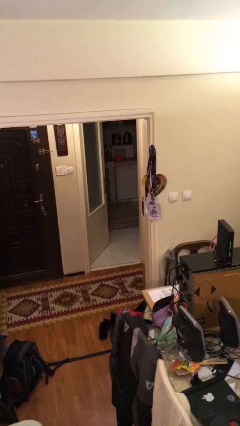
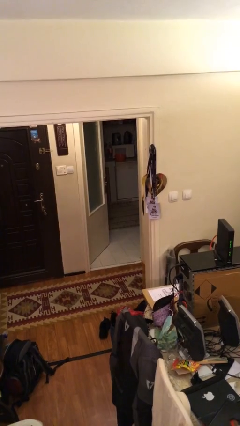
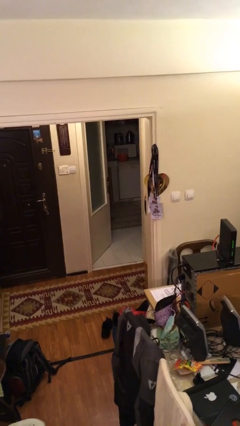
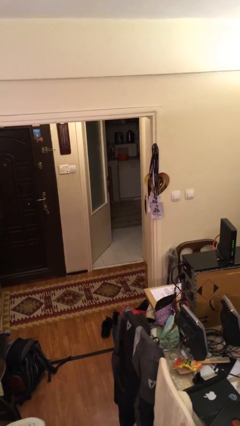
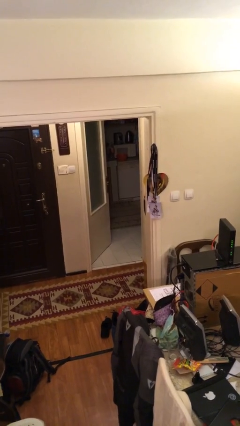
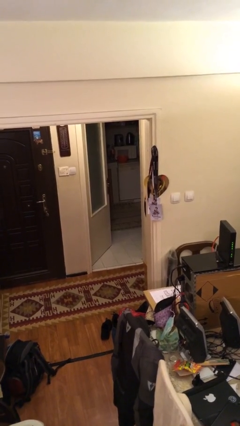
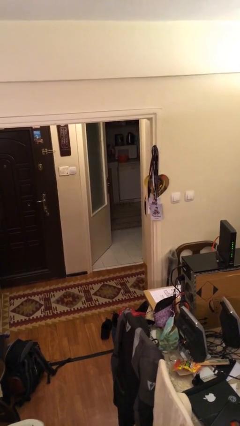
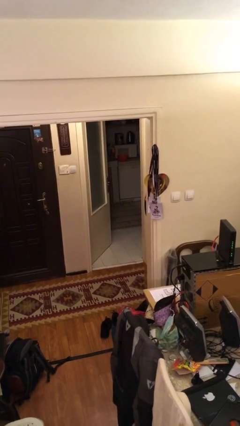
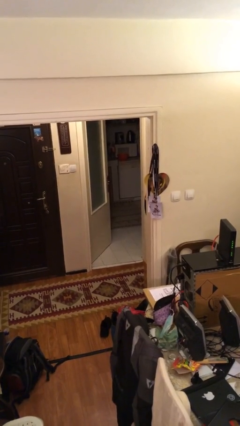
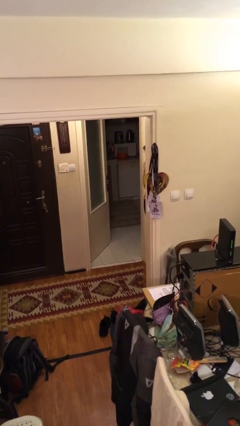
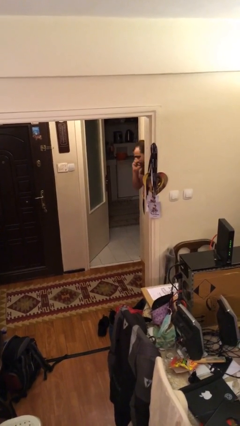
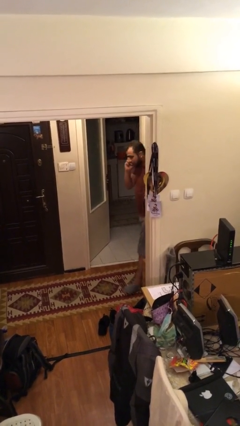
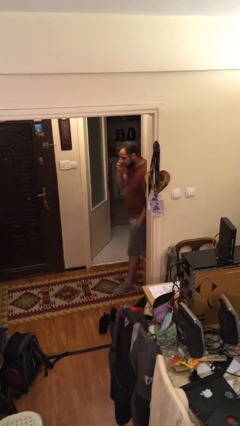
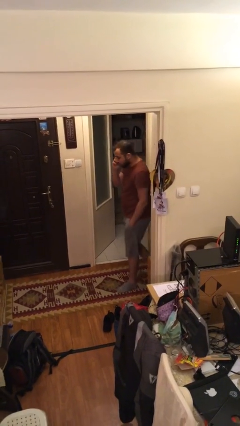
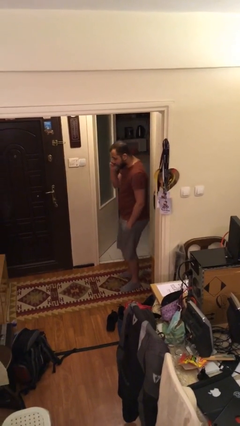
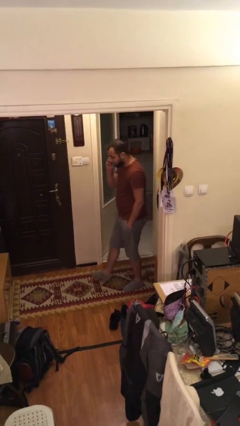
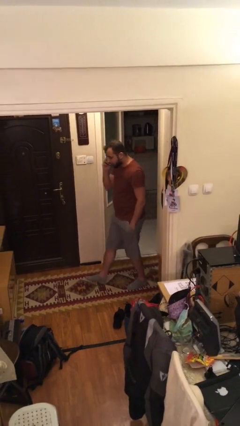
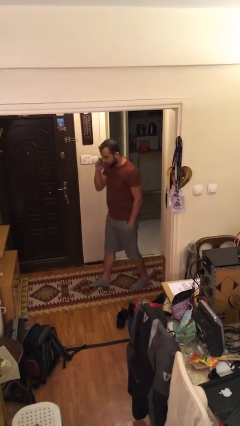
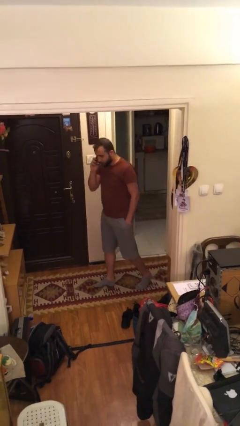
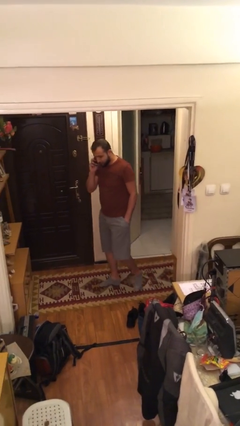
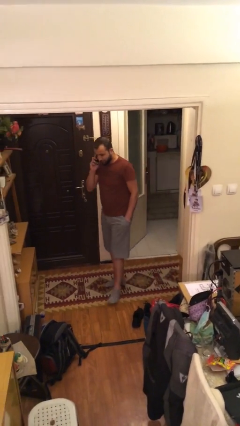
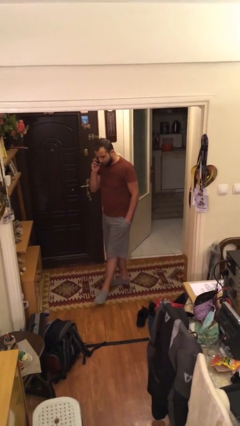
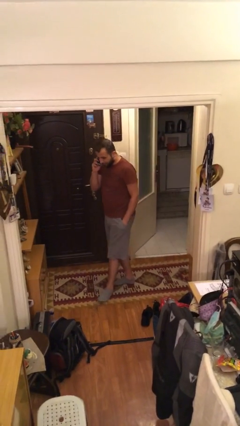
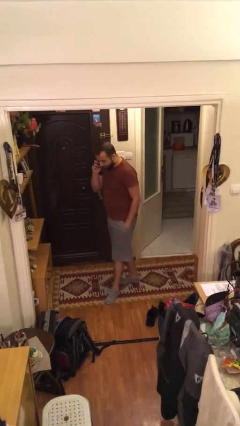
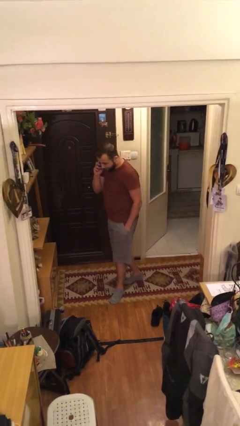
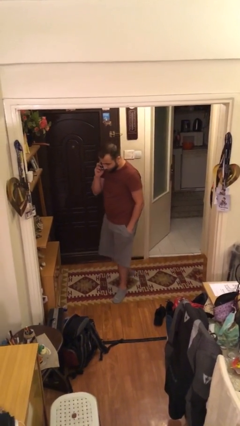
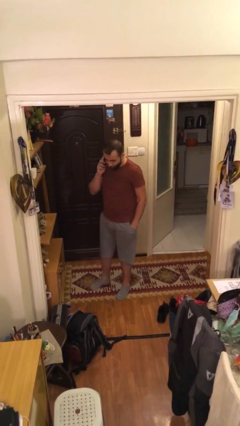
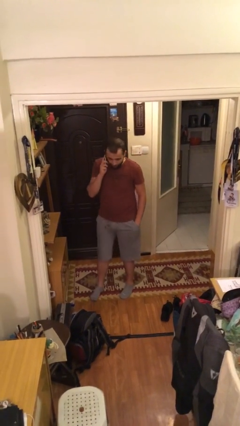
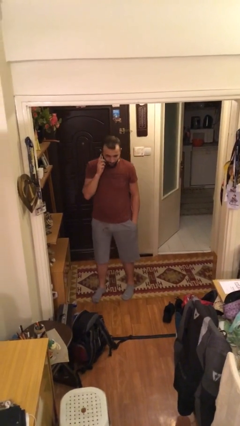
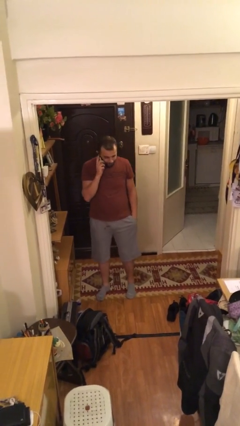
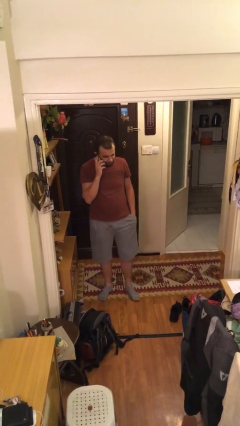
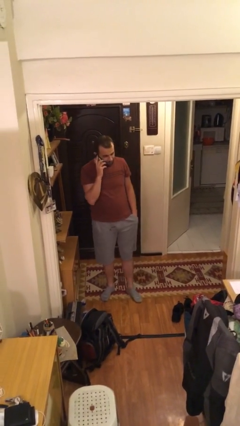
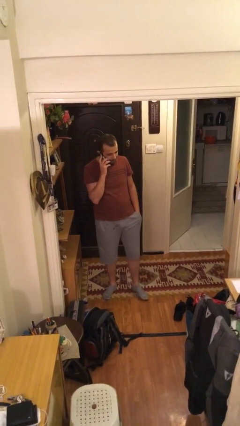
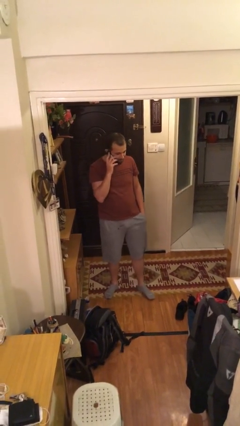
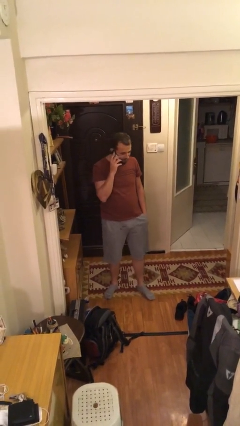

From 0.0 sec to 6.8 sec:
person enters scene through structure

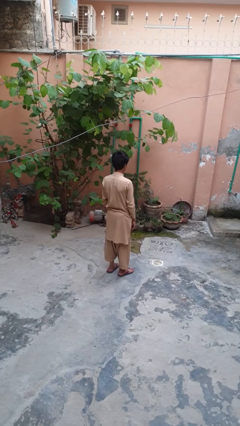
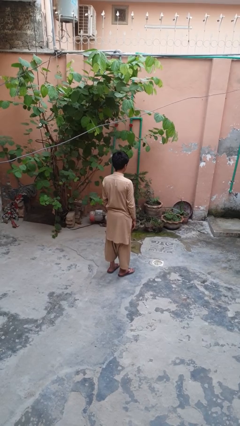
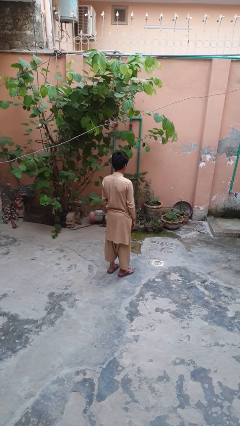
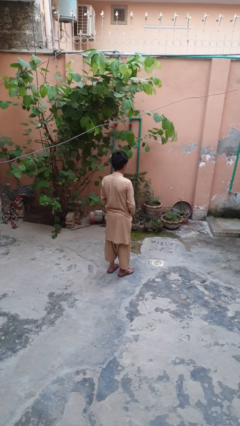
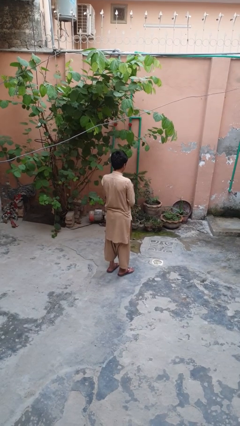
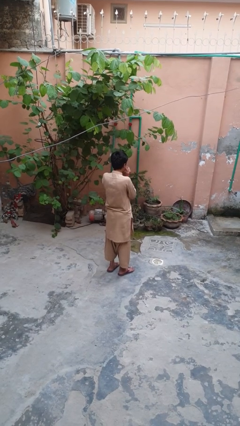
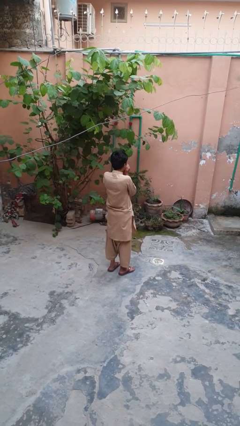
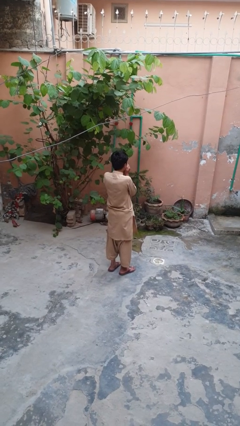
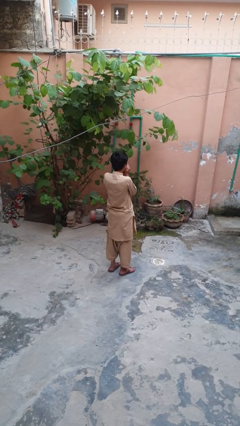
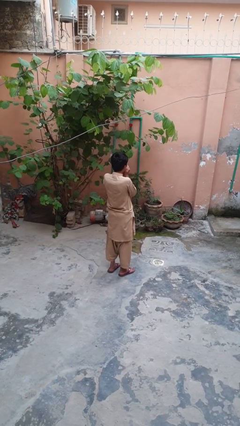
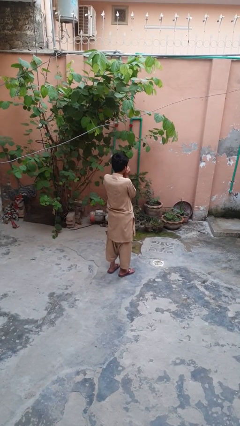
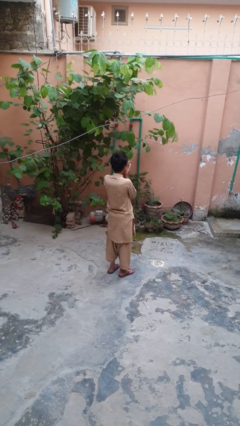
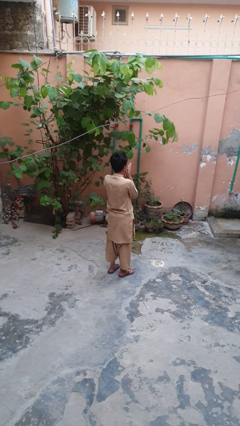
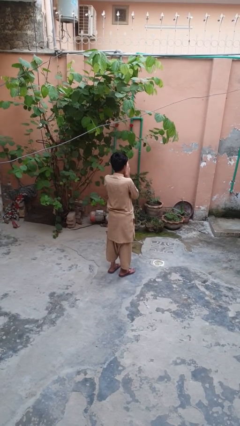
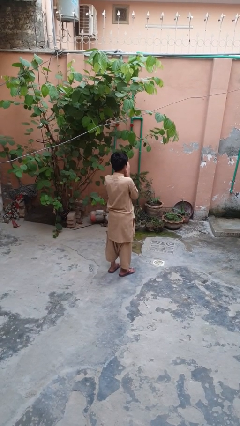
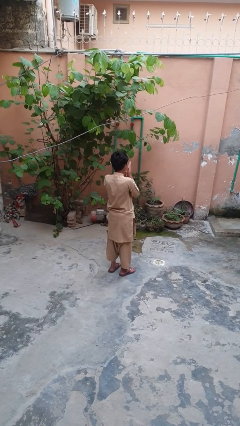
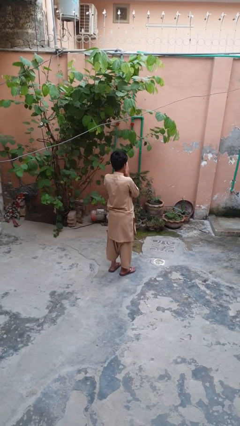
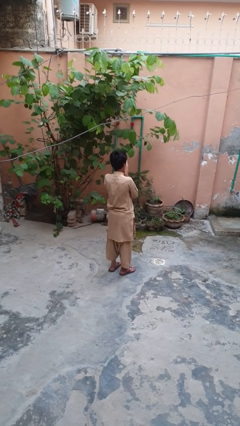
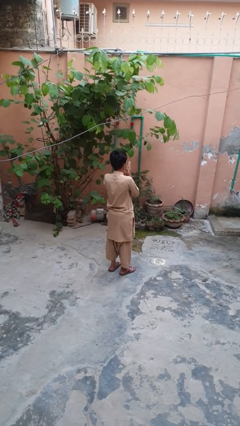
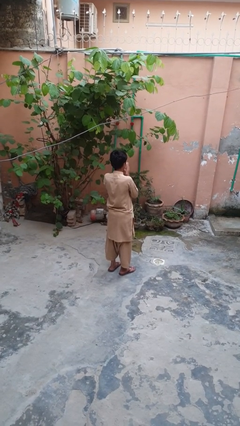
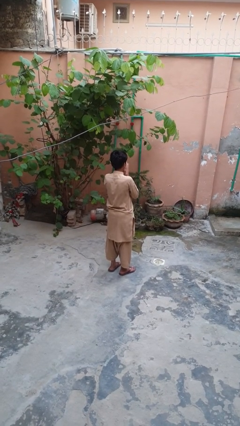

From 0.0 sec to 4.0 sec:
person blows into hands

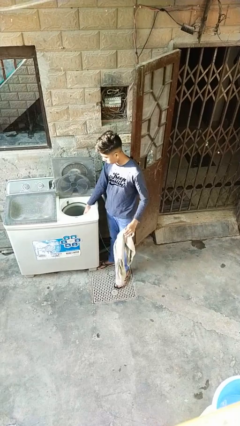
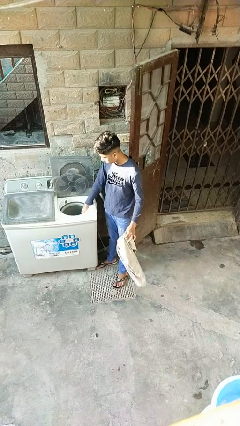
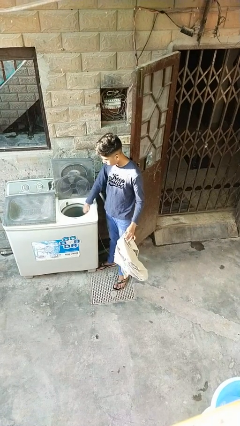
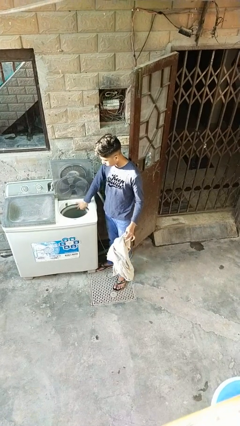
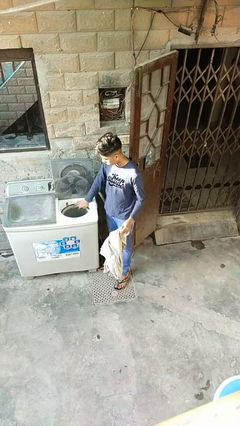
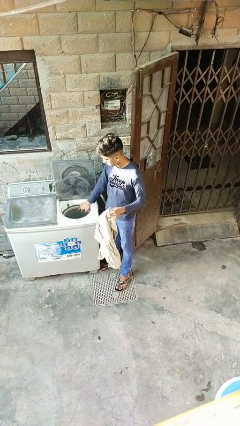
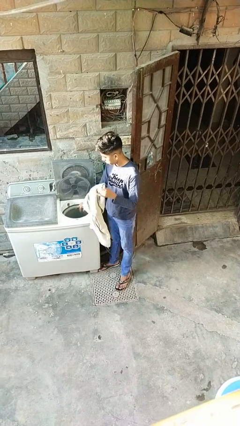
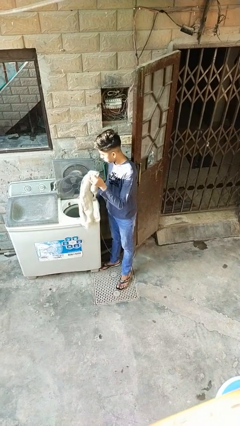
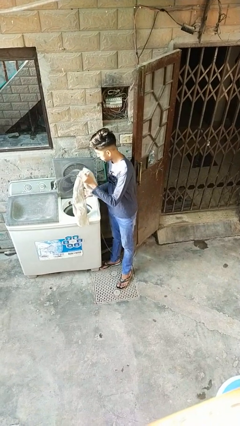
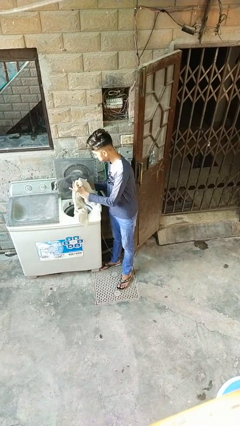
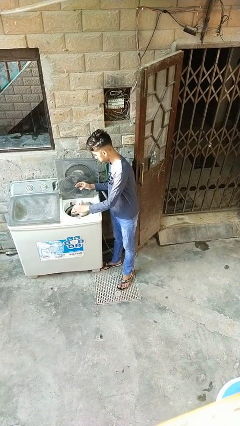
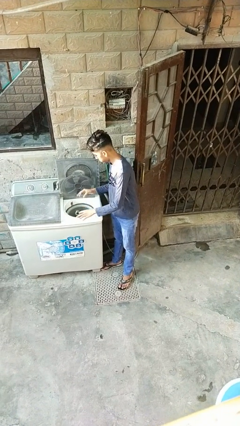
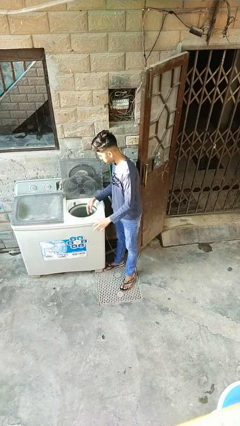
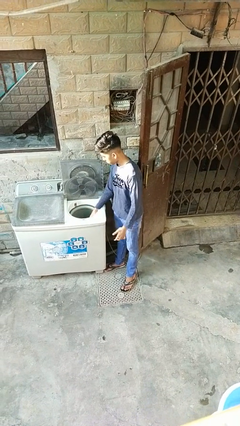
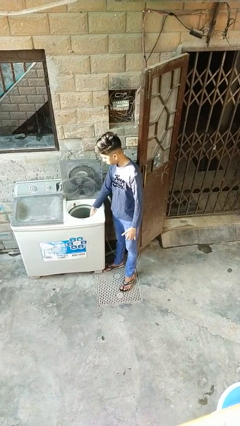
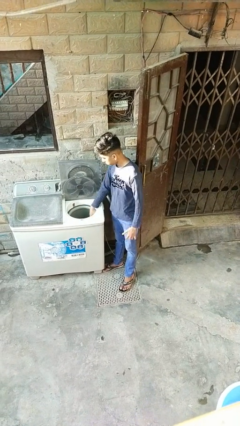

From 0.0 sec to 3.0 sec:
person loads dryer

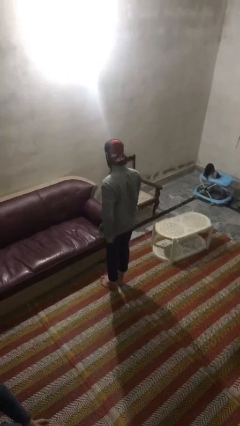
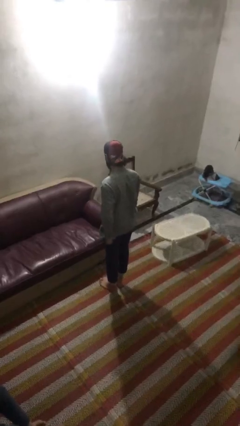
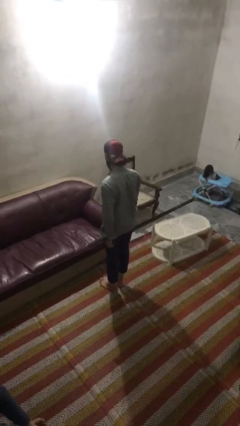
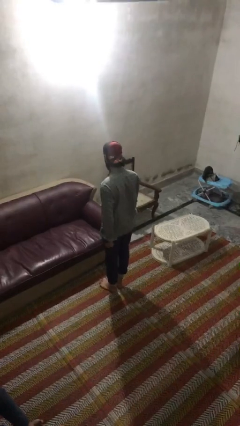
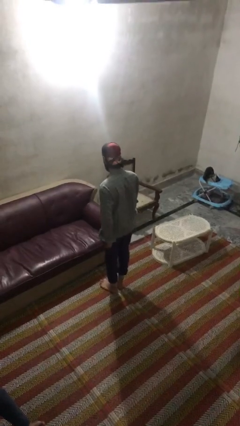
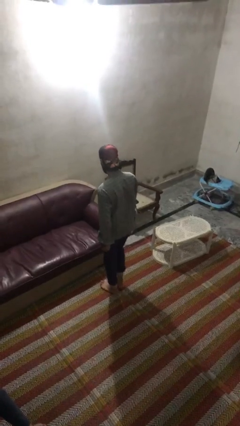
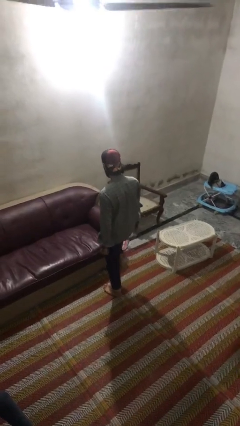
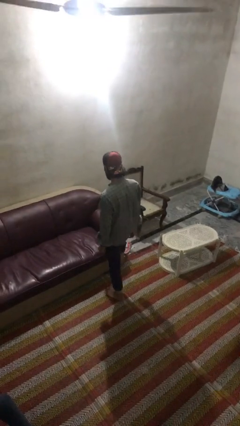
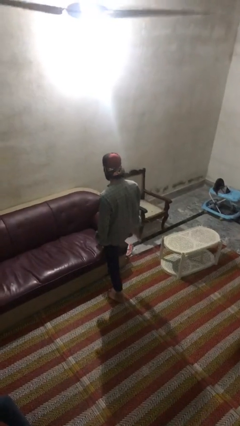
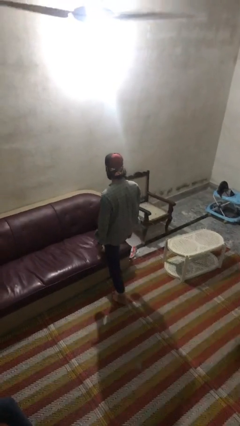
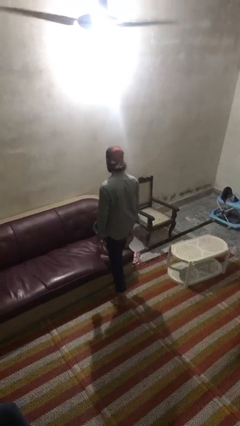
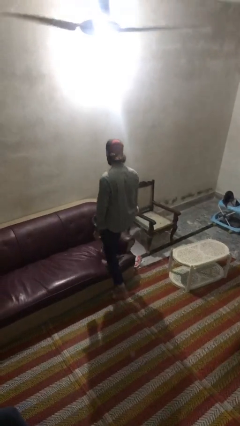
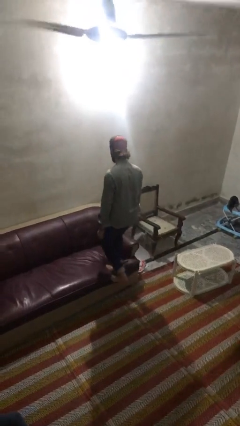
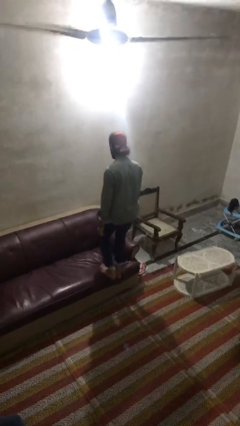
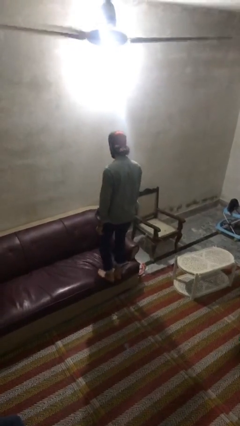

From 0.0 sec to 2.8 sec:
person climbs on couch

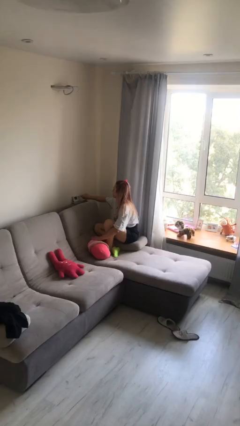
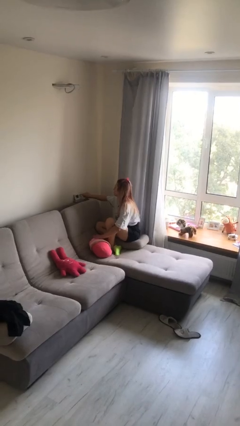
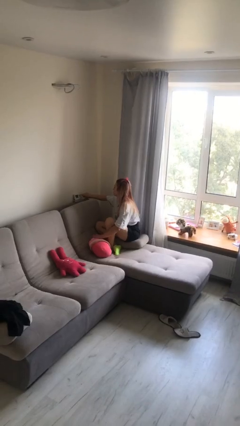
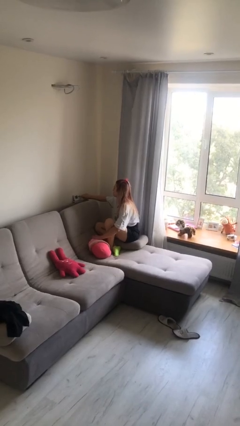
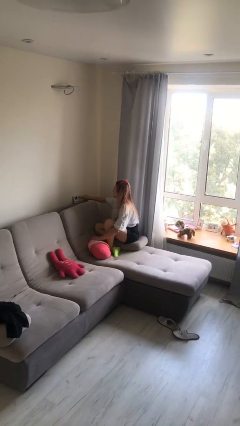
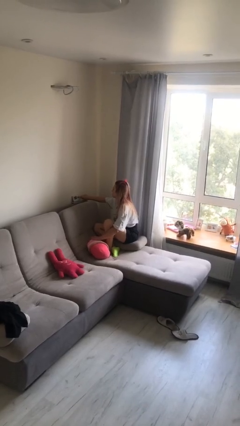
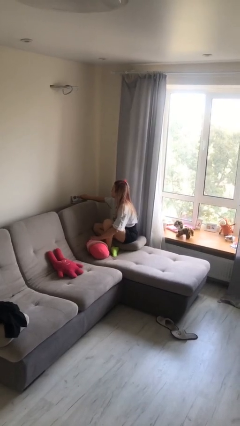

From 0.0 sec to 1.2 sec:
person adjusts thermostat

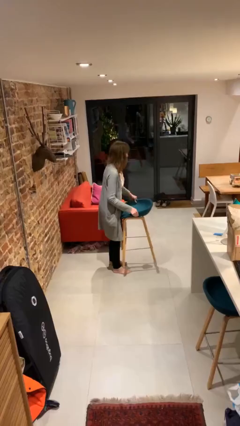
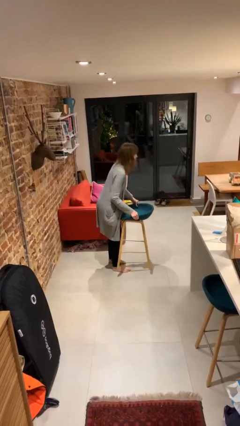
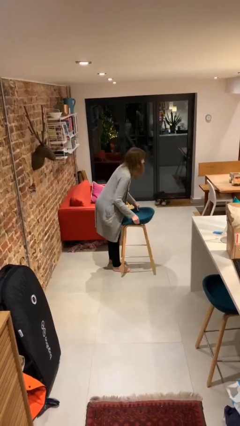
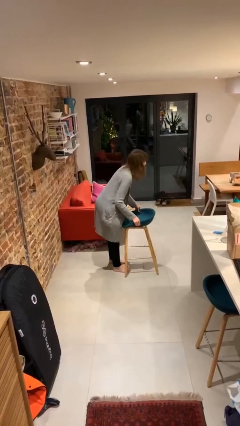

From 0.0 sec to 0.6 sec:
person puts down object on floor
